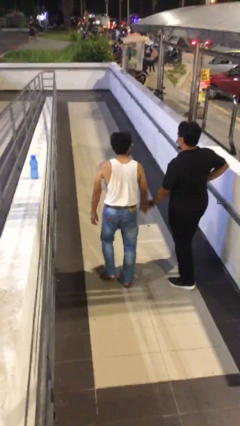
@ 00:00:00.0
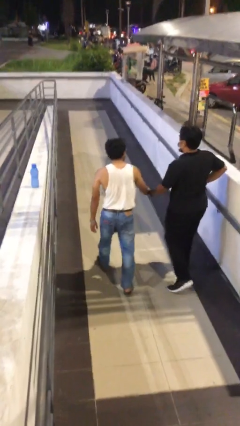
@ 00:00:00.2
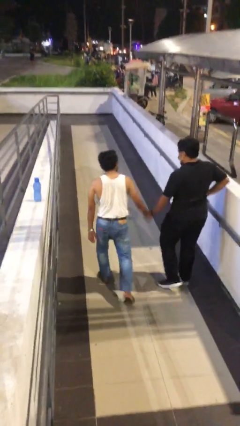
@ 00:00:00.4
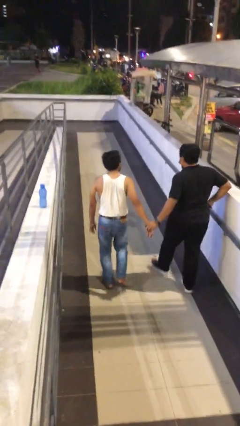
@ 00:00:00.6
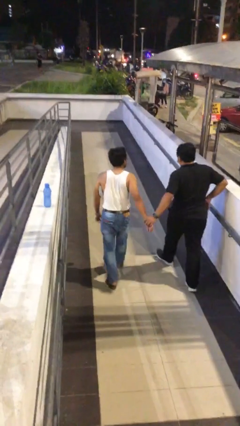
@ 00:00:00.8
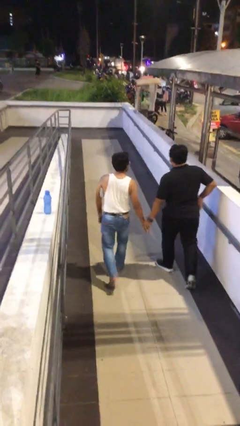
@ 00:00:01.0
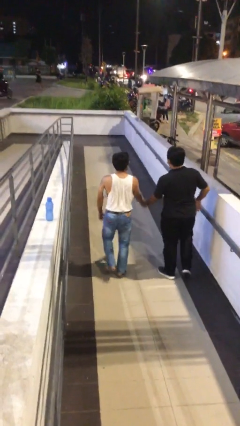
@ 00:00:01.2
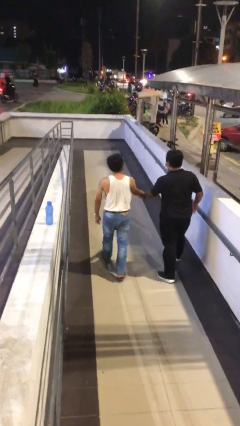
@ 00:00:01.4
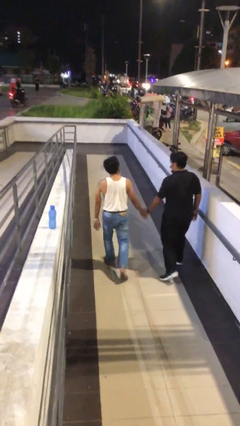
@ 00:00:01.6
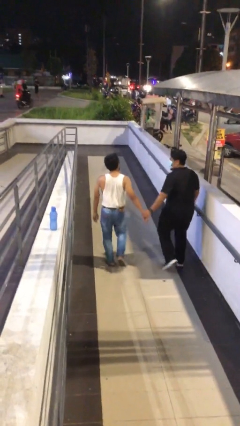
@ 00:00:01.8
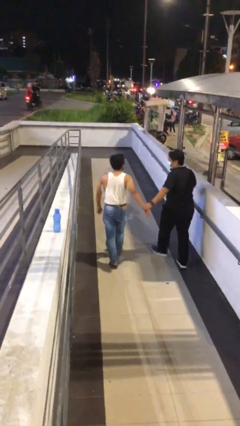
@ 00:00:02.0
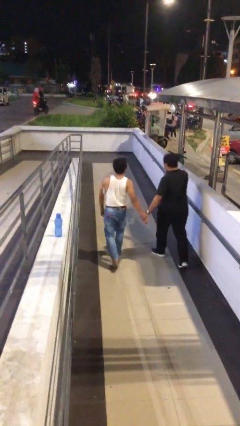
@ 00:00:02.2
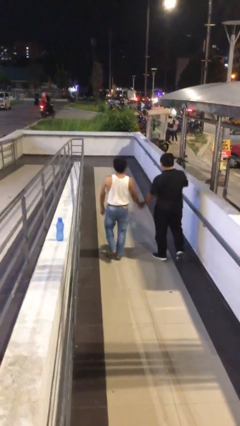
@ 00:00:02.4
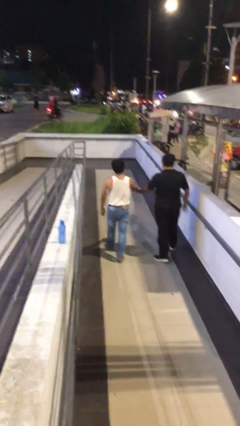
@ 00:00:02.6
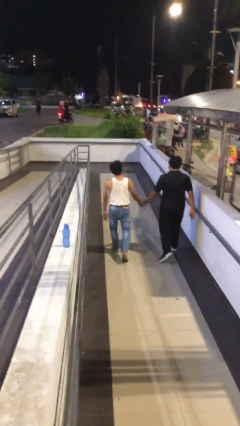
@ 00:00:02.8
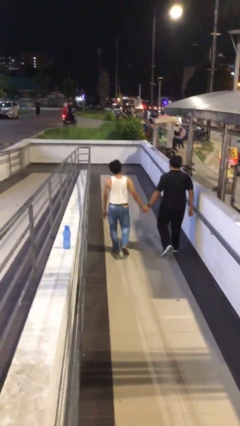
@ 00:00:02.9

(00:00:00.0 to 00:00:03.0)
person holds hand

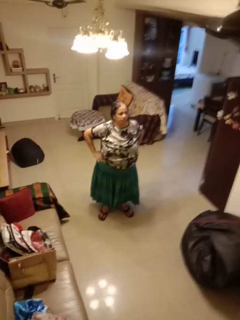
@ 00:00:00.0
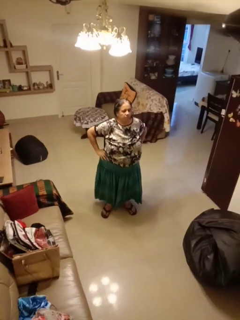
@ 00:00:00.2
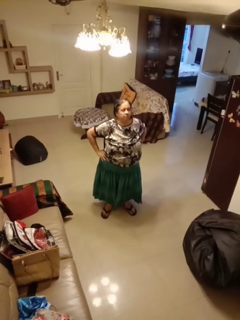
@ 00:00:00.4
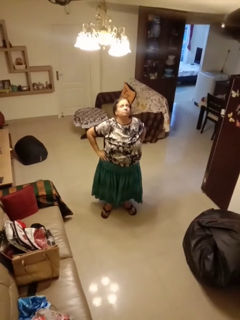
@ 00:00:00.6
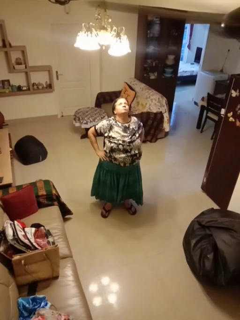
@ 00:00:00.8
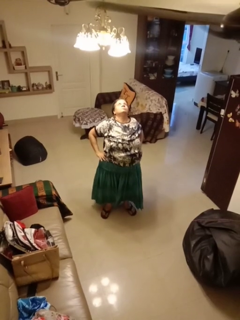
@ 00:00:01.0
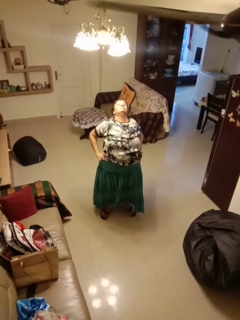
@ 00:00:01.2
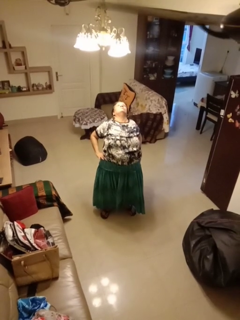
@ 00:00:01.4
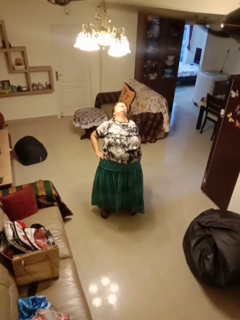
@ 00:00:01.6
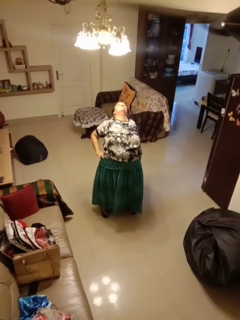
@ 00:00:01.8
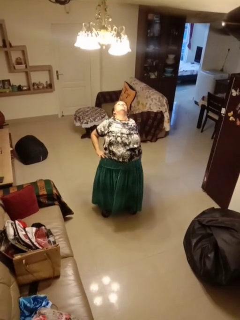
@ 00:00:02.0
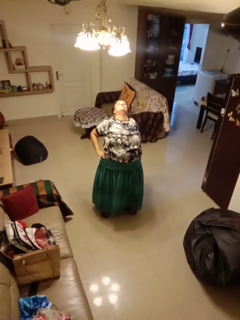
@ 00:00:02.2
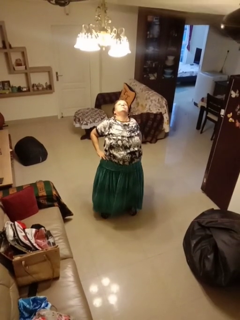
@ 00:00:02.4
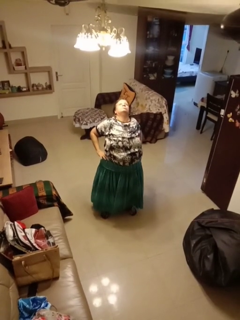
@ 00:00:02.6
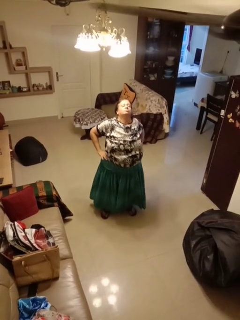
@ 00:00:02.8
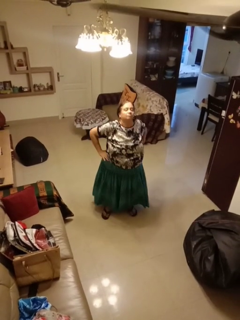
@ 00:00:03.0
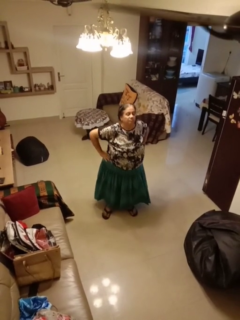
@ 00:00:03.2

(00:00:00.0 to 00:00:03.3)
person stretches back

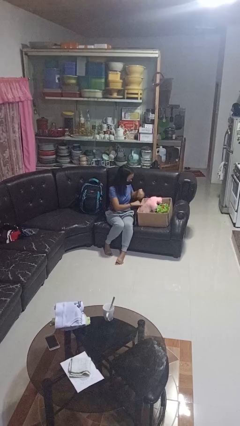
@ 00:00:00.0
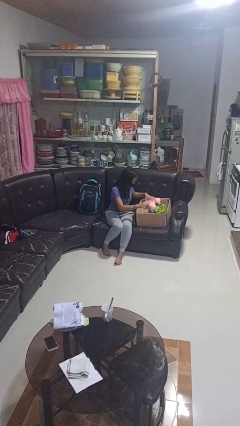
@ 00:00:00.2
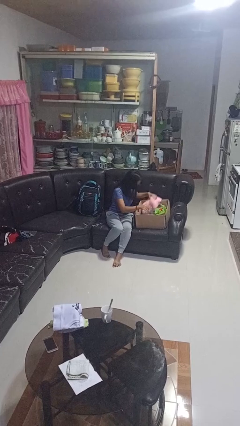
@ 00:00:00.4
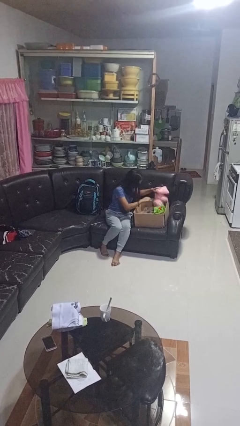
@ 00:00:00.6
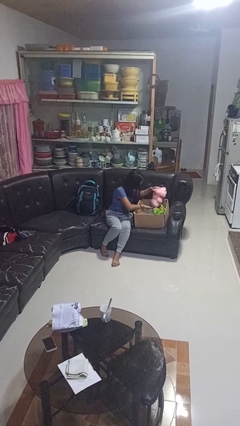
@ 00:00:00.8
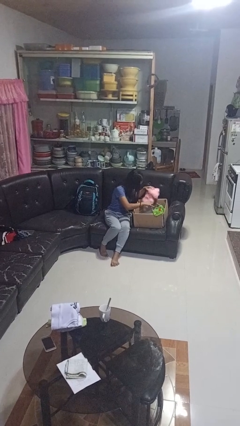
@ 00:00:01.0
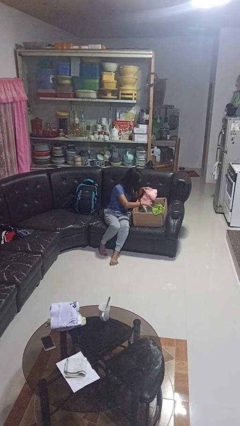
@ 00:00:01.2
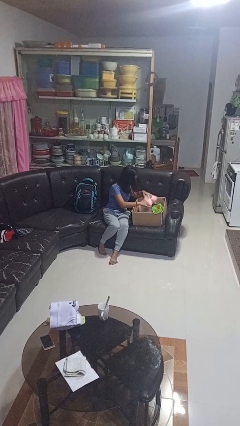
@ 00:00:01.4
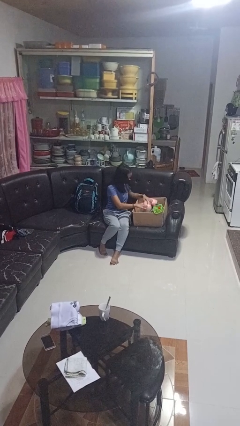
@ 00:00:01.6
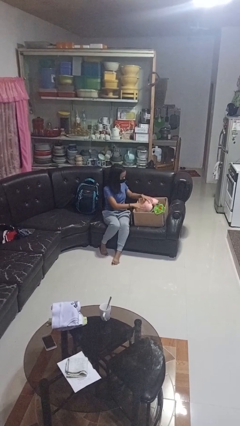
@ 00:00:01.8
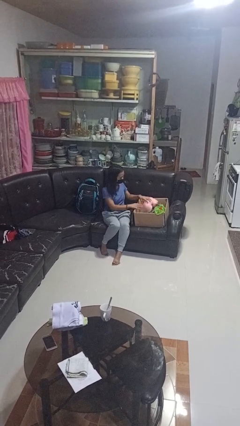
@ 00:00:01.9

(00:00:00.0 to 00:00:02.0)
person searches in box

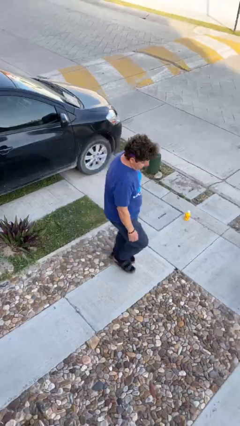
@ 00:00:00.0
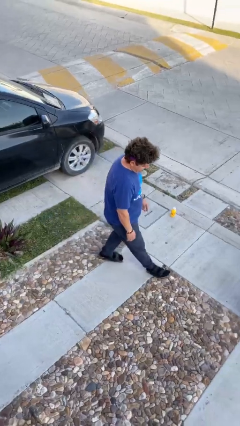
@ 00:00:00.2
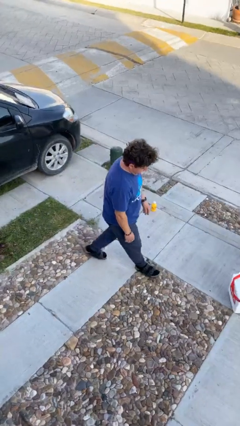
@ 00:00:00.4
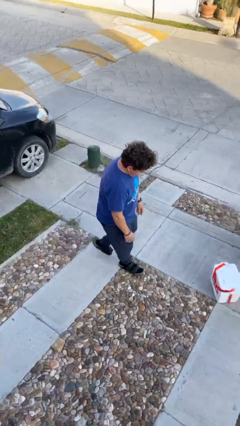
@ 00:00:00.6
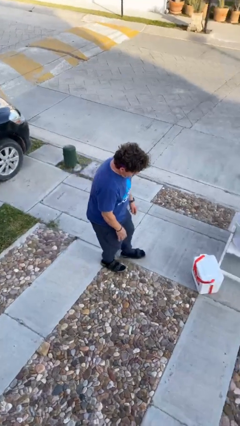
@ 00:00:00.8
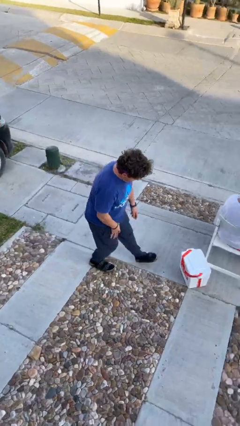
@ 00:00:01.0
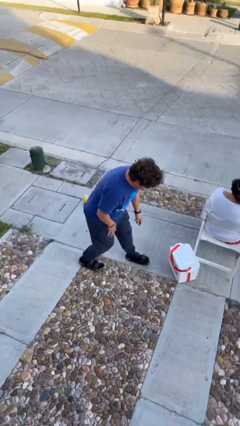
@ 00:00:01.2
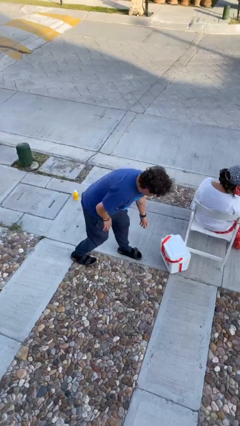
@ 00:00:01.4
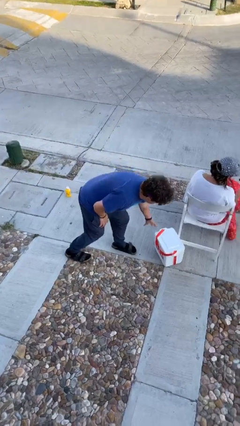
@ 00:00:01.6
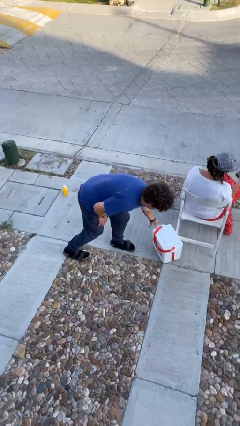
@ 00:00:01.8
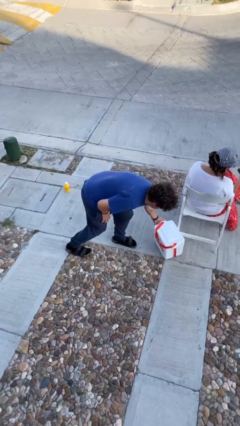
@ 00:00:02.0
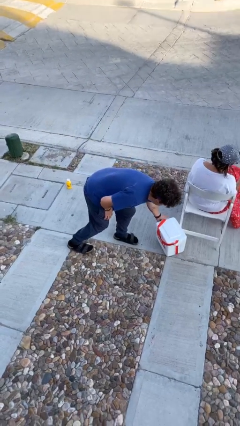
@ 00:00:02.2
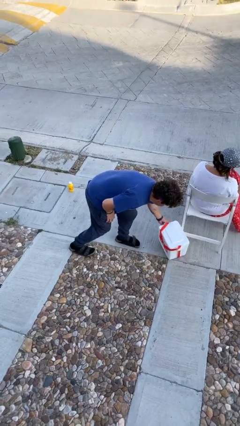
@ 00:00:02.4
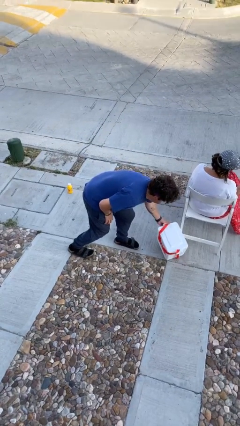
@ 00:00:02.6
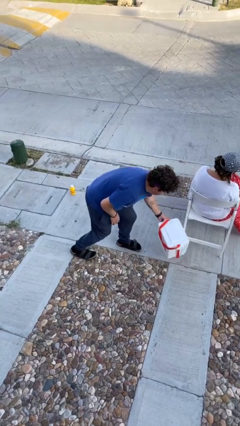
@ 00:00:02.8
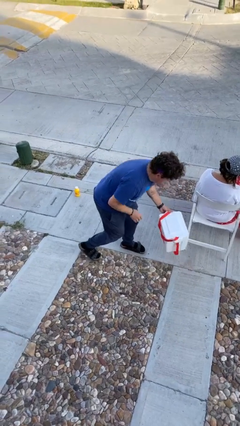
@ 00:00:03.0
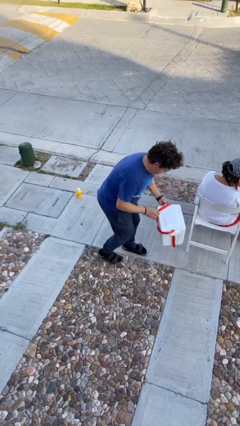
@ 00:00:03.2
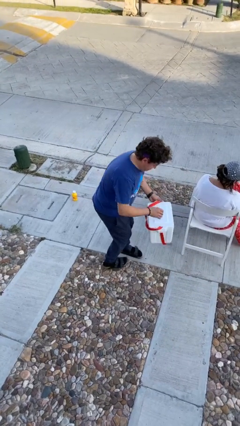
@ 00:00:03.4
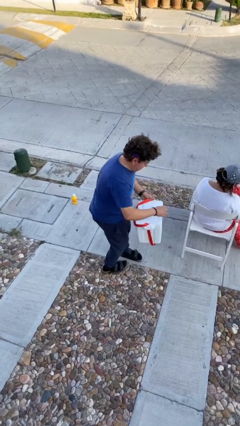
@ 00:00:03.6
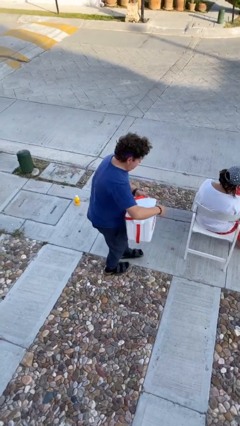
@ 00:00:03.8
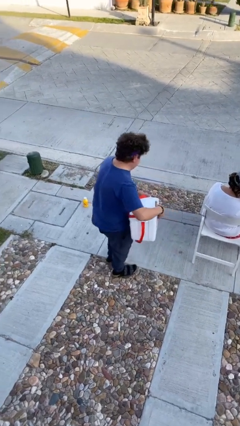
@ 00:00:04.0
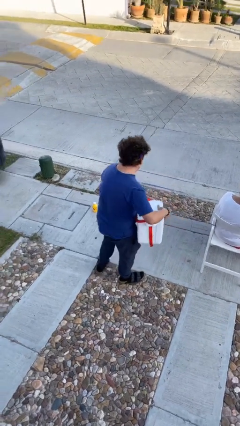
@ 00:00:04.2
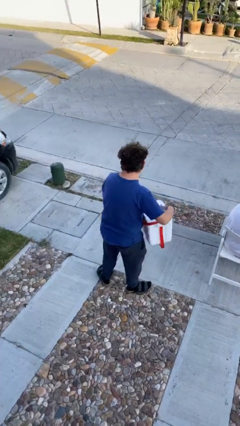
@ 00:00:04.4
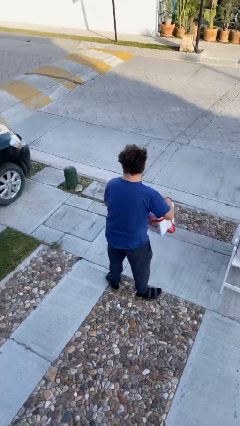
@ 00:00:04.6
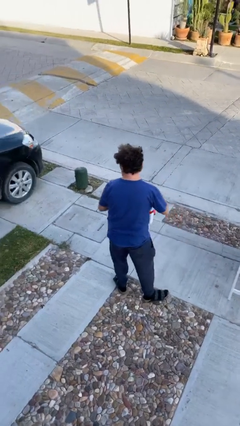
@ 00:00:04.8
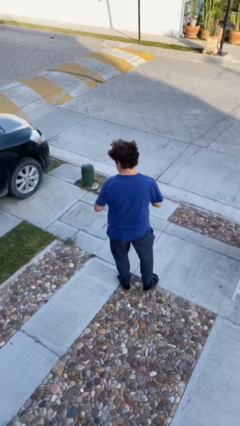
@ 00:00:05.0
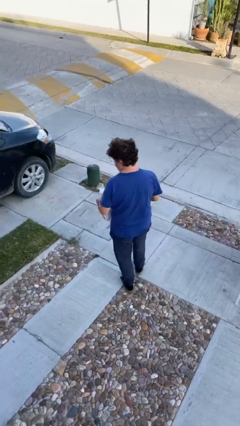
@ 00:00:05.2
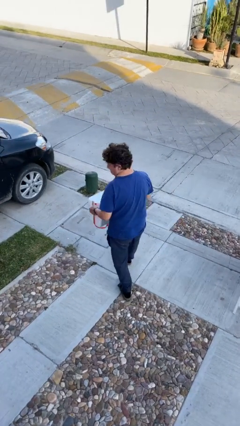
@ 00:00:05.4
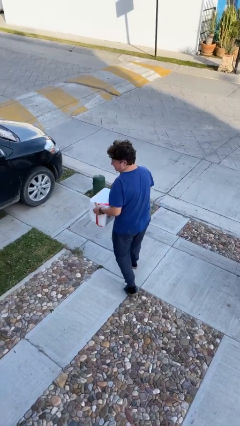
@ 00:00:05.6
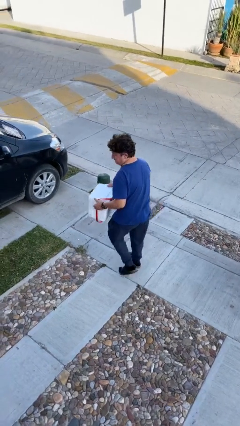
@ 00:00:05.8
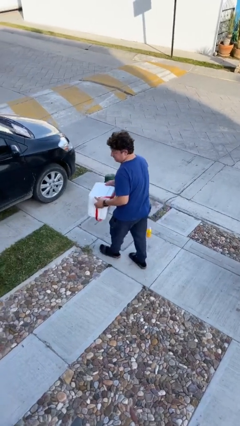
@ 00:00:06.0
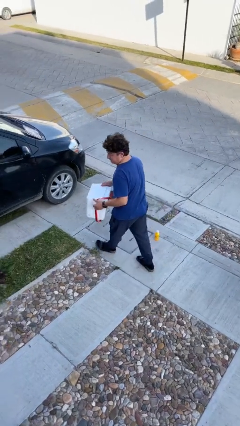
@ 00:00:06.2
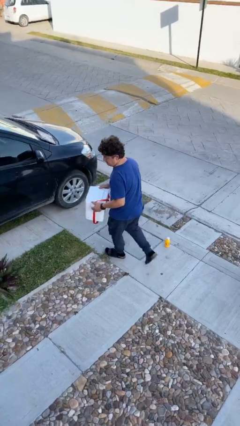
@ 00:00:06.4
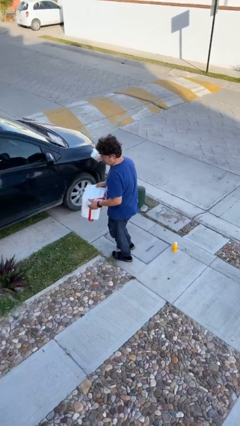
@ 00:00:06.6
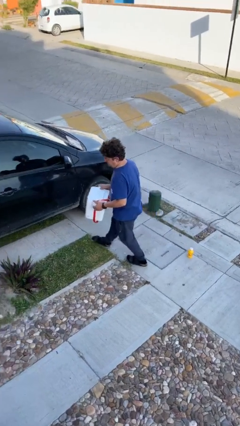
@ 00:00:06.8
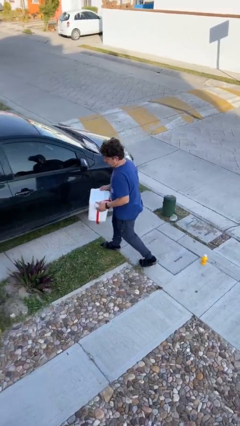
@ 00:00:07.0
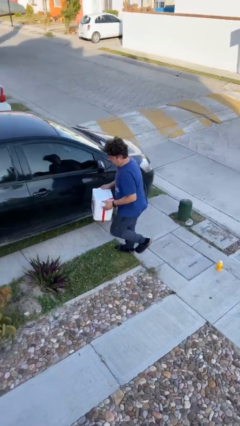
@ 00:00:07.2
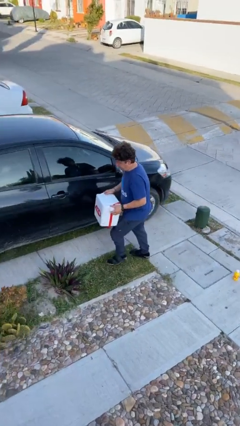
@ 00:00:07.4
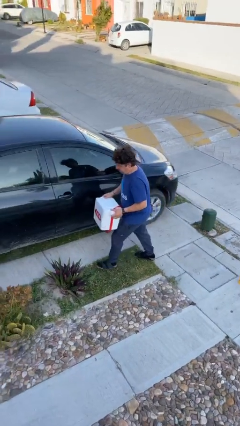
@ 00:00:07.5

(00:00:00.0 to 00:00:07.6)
person steals object from person

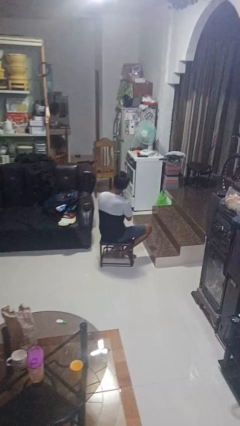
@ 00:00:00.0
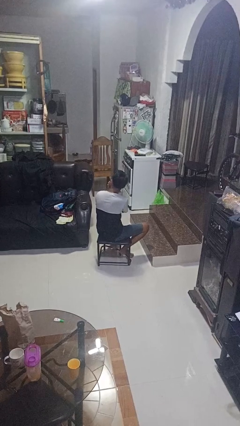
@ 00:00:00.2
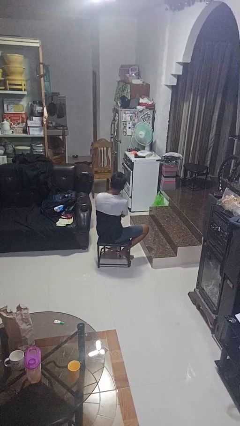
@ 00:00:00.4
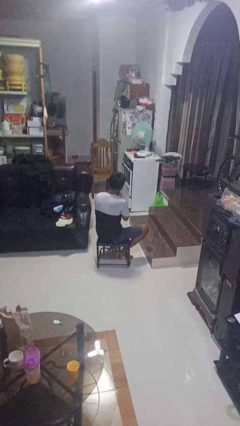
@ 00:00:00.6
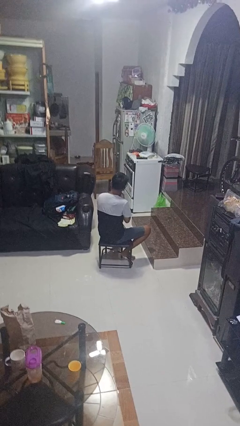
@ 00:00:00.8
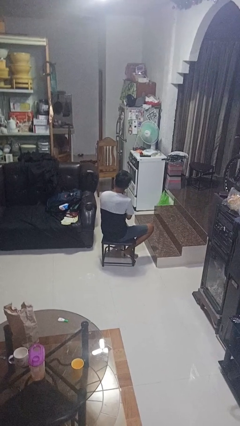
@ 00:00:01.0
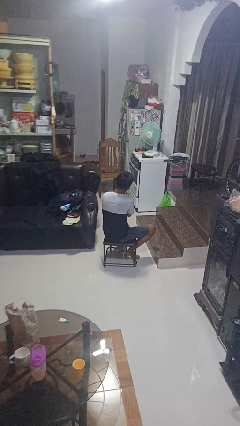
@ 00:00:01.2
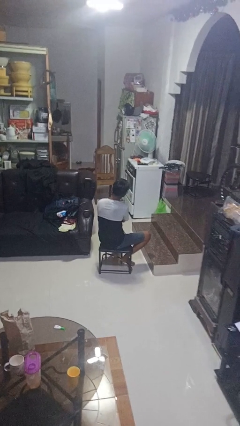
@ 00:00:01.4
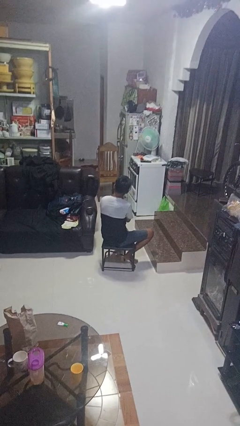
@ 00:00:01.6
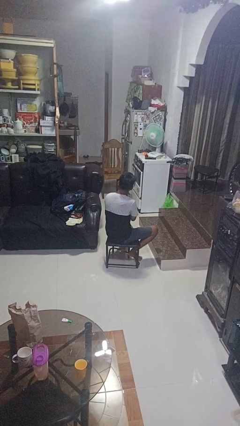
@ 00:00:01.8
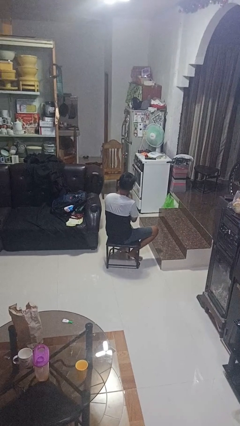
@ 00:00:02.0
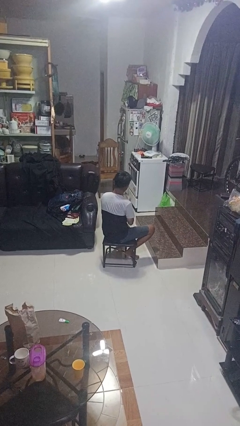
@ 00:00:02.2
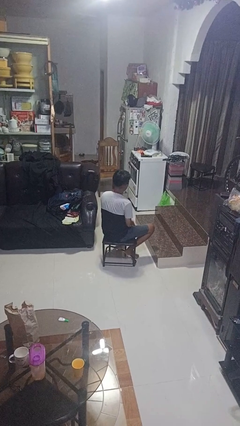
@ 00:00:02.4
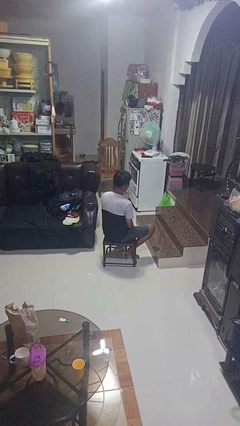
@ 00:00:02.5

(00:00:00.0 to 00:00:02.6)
person strokes chin
